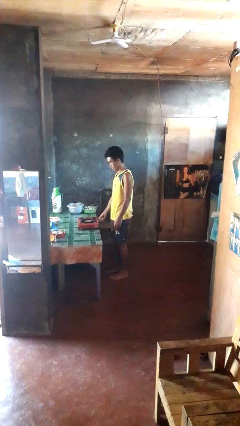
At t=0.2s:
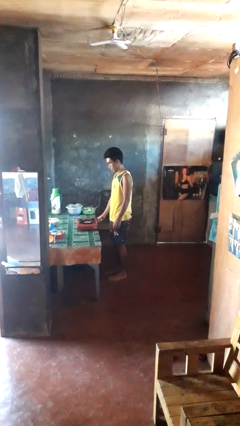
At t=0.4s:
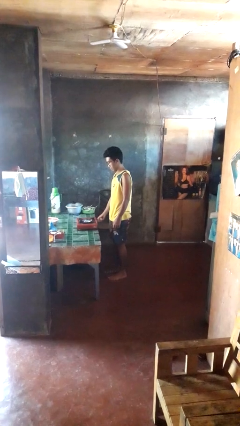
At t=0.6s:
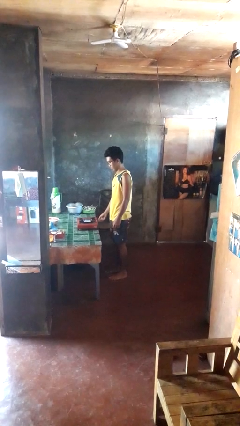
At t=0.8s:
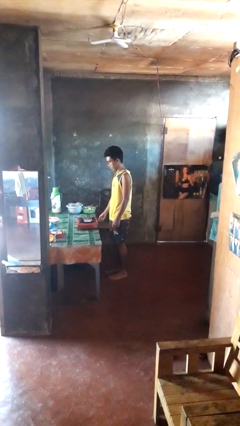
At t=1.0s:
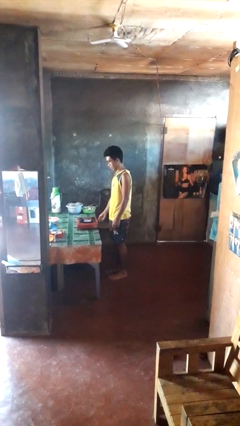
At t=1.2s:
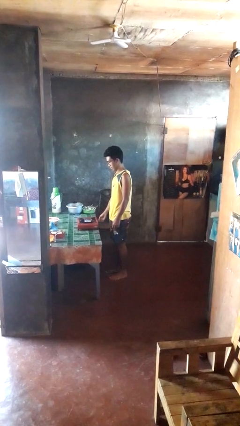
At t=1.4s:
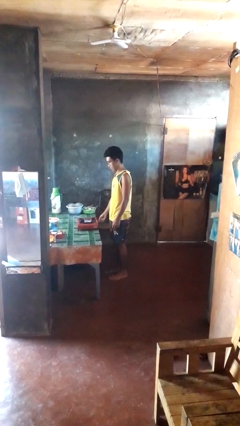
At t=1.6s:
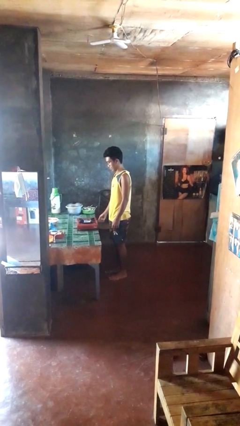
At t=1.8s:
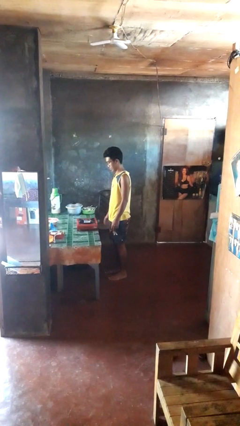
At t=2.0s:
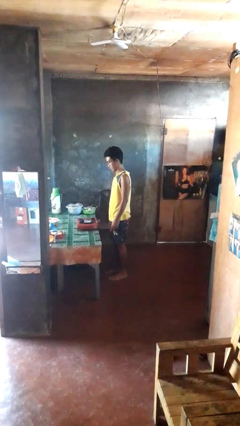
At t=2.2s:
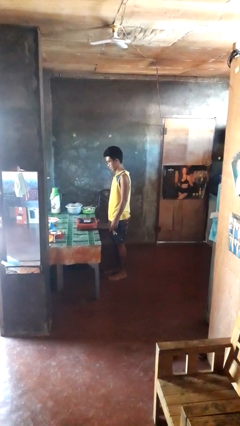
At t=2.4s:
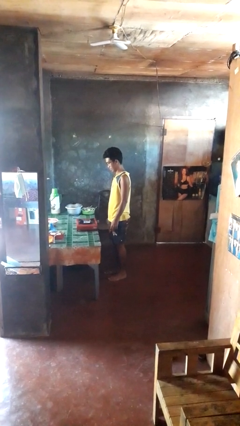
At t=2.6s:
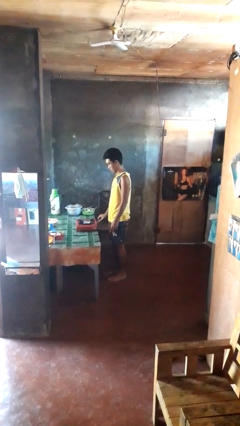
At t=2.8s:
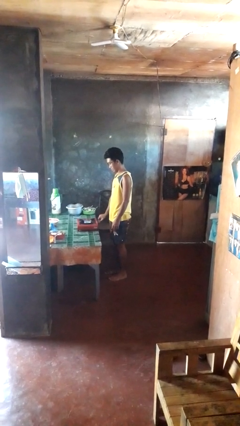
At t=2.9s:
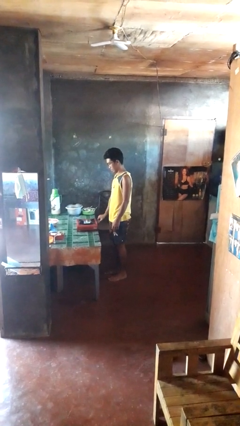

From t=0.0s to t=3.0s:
person turns on stovetop

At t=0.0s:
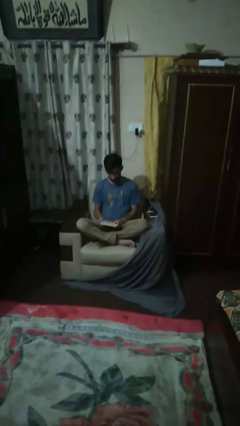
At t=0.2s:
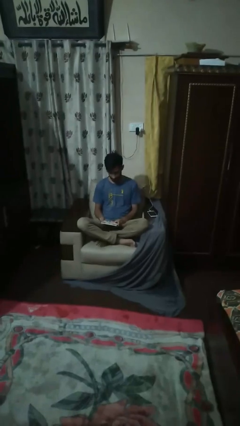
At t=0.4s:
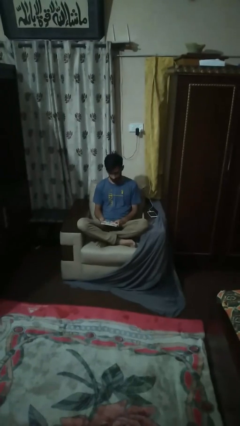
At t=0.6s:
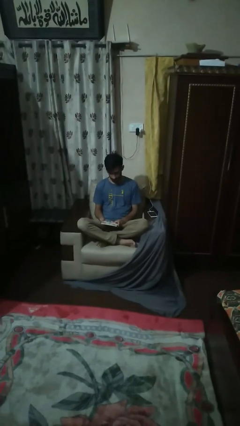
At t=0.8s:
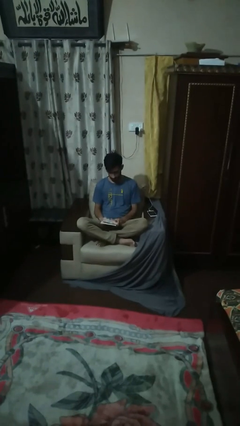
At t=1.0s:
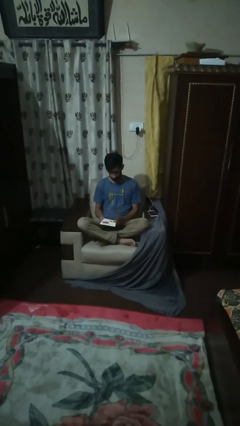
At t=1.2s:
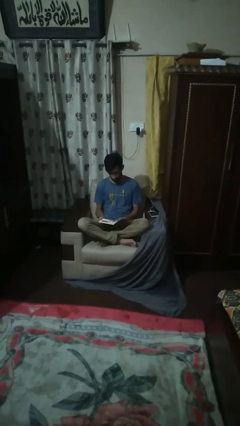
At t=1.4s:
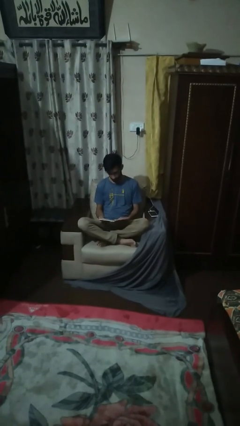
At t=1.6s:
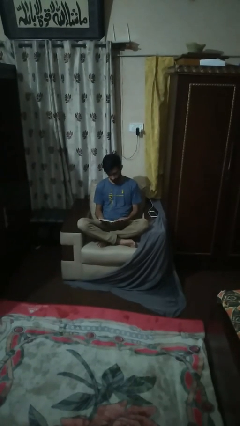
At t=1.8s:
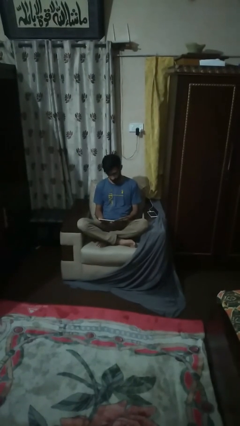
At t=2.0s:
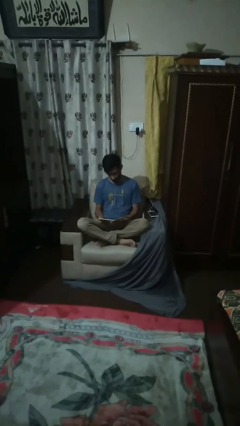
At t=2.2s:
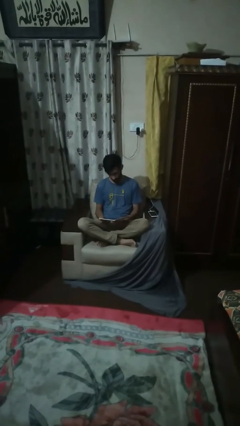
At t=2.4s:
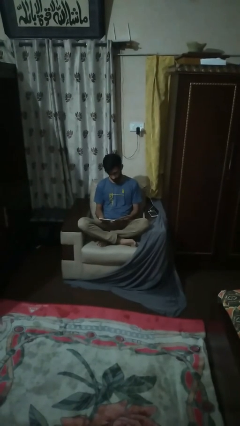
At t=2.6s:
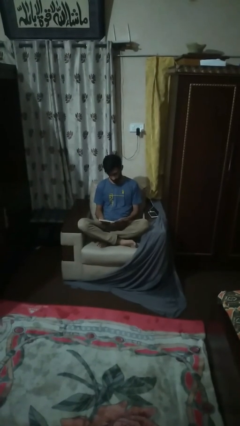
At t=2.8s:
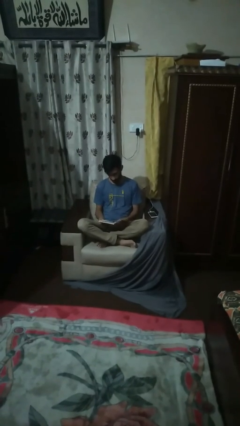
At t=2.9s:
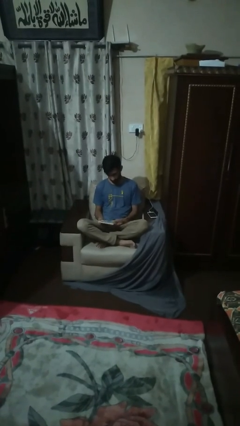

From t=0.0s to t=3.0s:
person reads book

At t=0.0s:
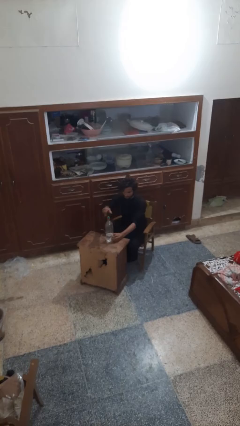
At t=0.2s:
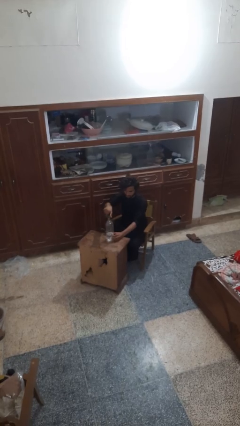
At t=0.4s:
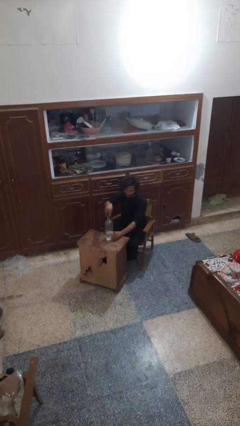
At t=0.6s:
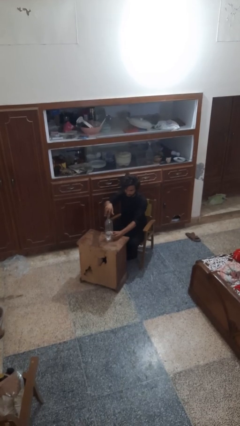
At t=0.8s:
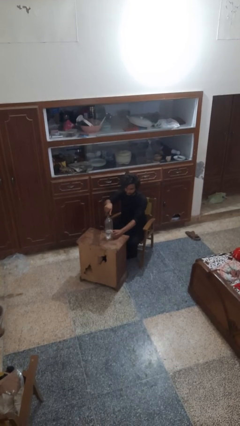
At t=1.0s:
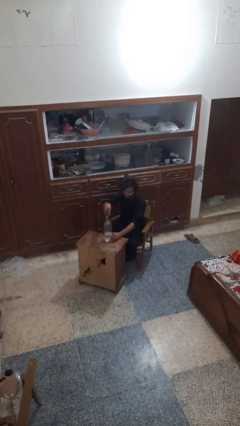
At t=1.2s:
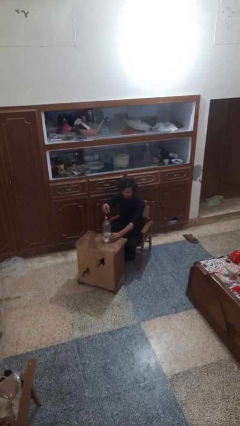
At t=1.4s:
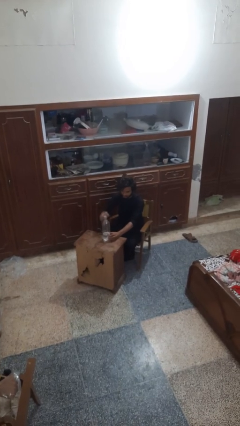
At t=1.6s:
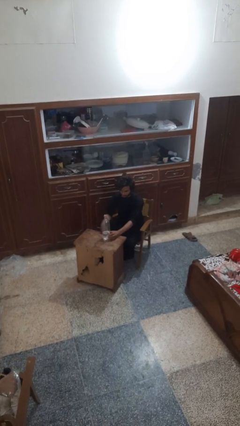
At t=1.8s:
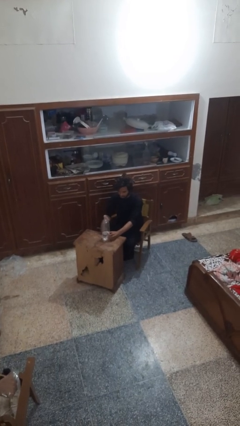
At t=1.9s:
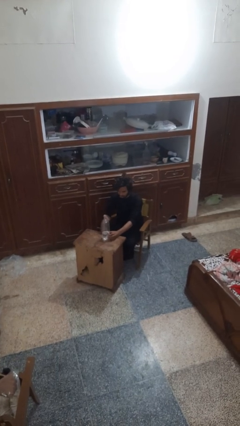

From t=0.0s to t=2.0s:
person unscrews lid from bottle

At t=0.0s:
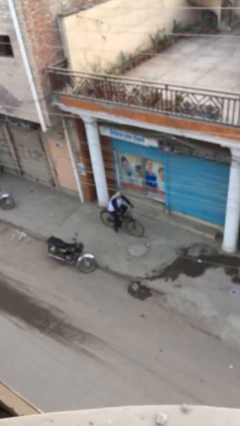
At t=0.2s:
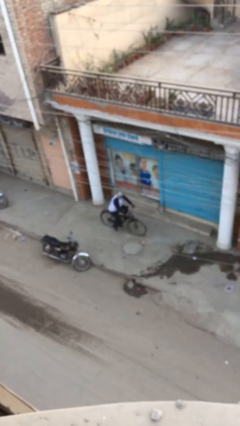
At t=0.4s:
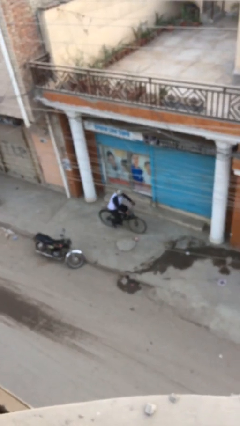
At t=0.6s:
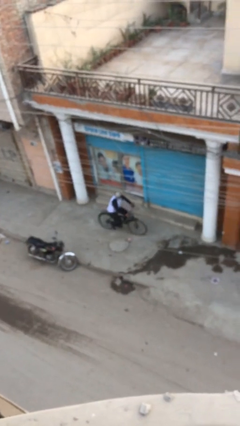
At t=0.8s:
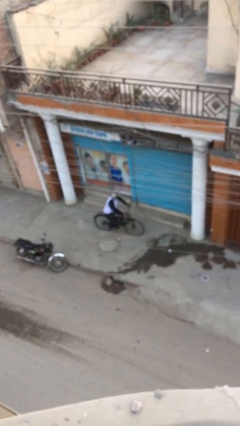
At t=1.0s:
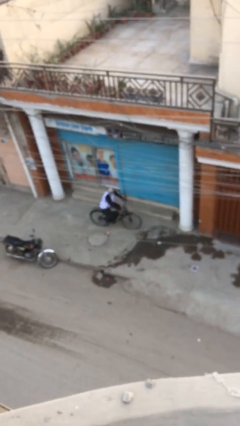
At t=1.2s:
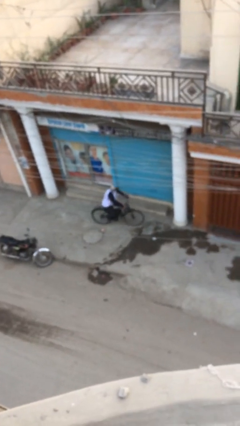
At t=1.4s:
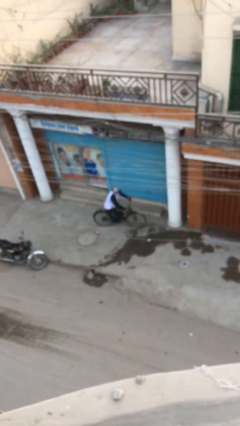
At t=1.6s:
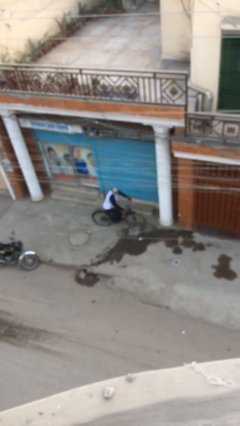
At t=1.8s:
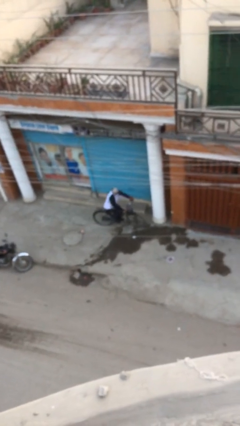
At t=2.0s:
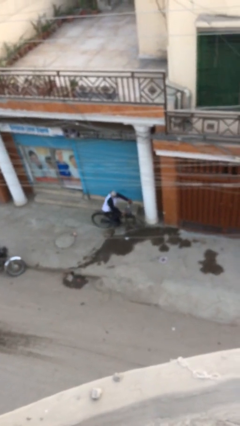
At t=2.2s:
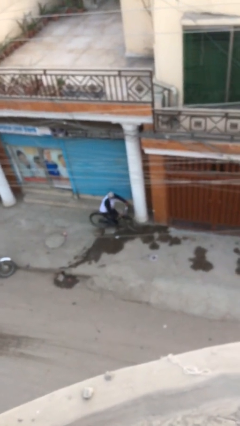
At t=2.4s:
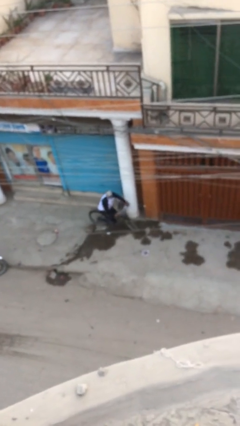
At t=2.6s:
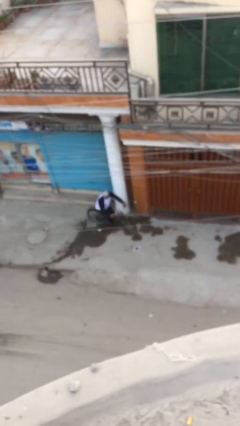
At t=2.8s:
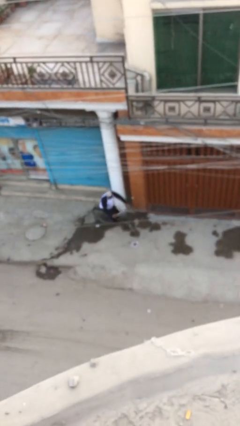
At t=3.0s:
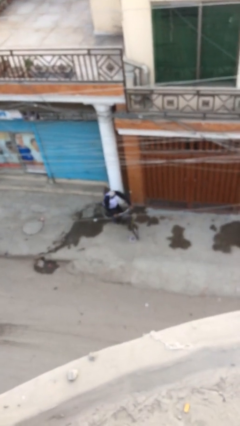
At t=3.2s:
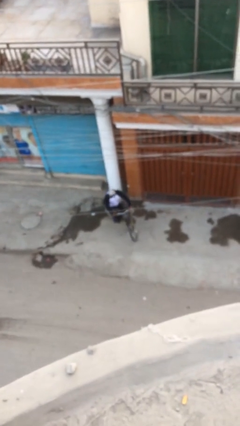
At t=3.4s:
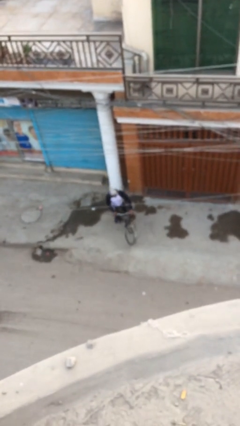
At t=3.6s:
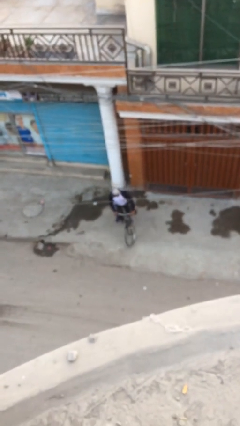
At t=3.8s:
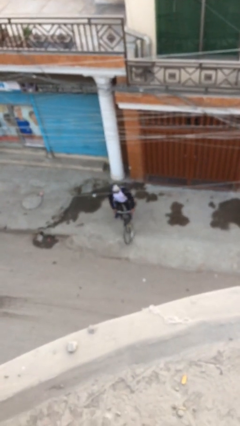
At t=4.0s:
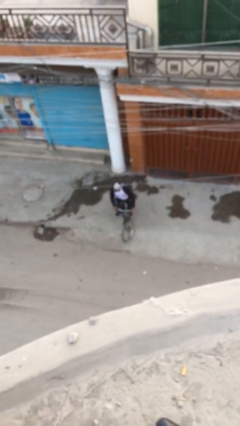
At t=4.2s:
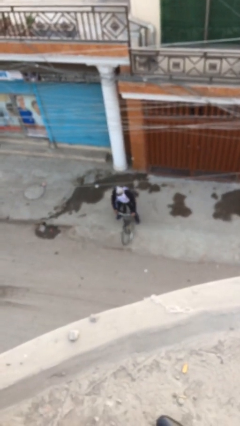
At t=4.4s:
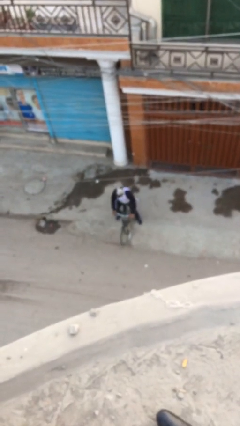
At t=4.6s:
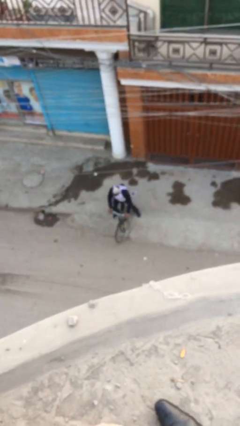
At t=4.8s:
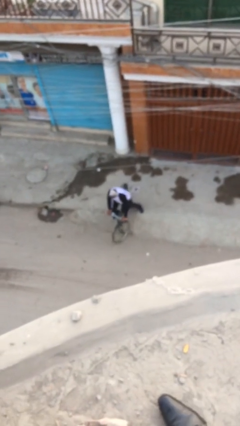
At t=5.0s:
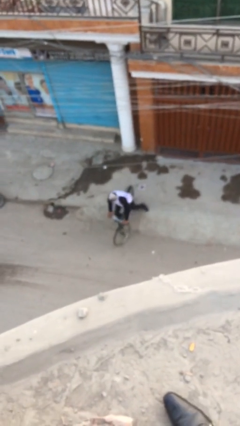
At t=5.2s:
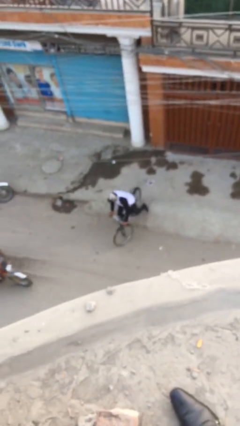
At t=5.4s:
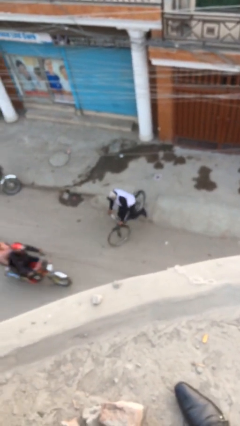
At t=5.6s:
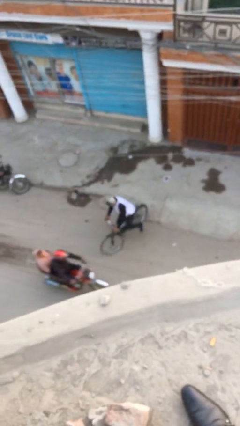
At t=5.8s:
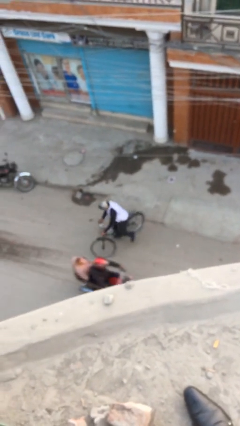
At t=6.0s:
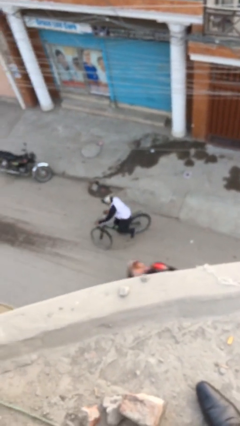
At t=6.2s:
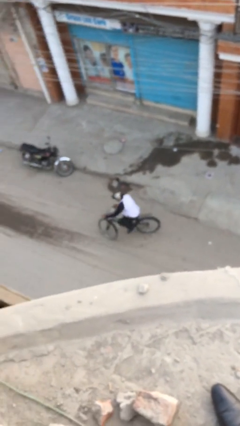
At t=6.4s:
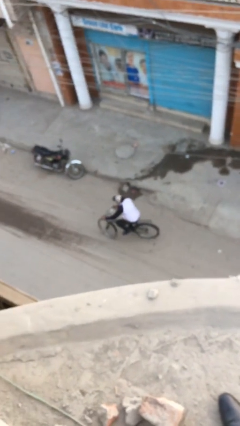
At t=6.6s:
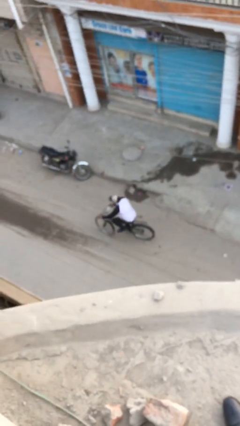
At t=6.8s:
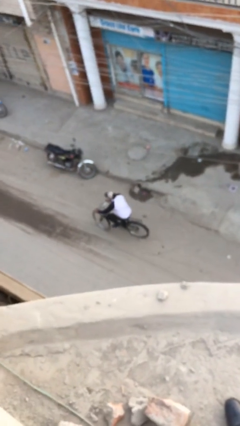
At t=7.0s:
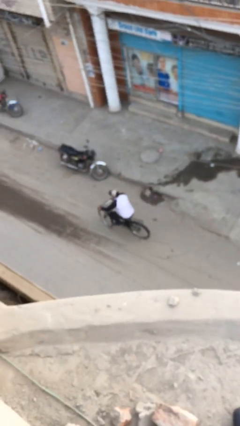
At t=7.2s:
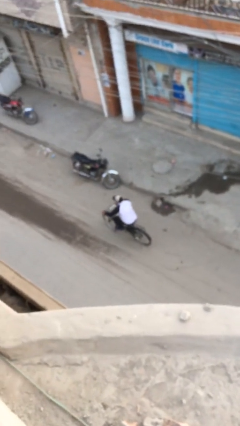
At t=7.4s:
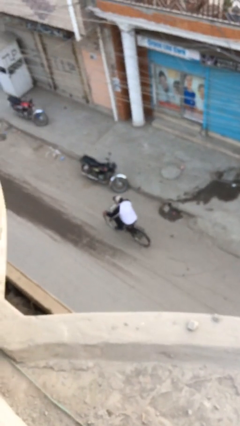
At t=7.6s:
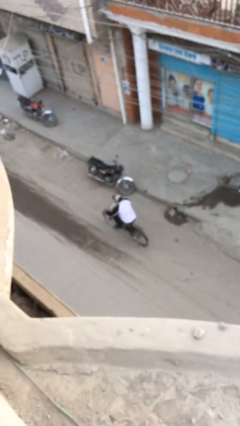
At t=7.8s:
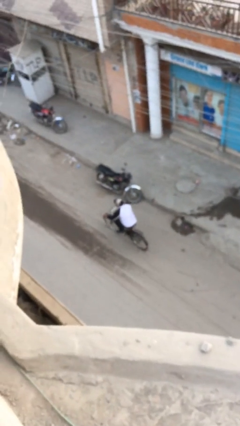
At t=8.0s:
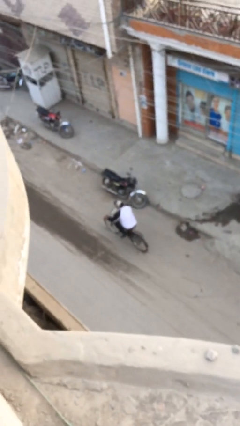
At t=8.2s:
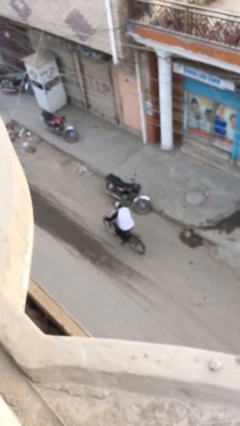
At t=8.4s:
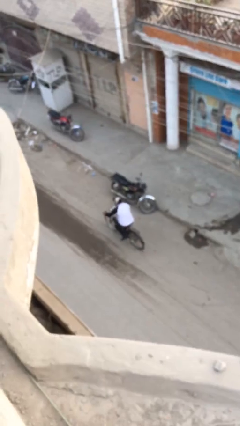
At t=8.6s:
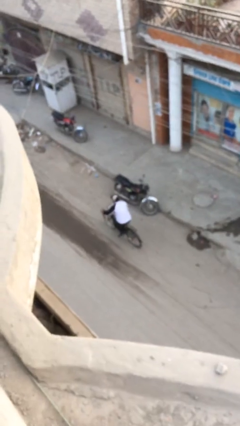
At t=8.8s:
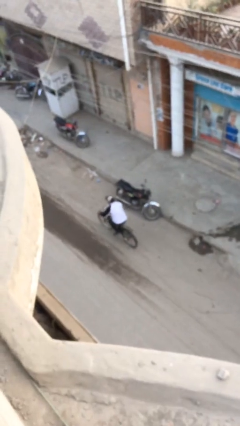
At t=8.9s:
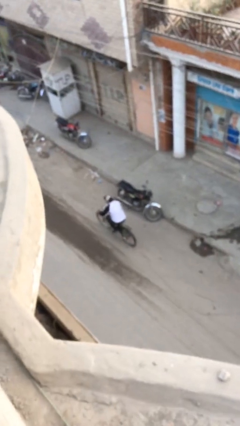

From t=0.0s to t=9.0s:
person rides bicycle

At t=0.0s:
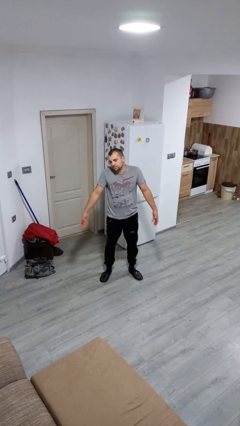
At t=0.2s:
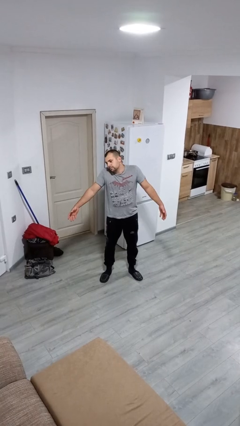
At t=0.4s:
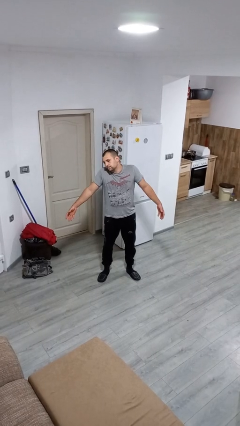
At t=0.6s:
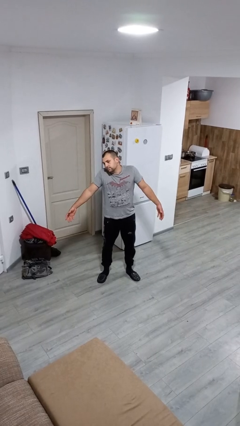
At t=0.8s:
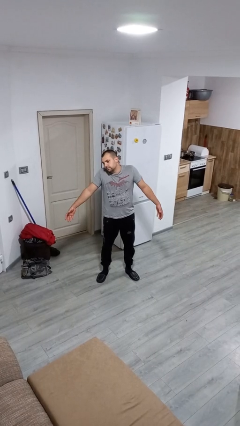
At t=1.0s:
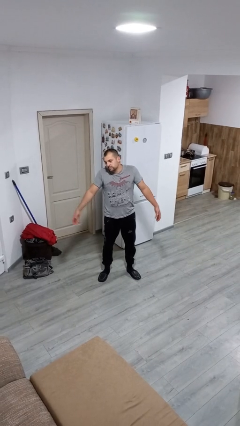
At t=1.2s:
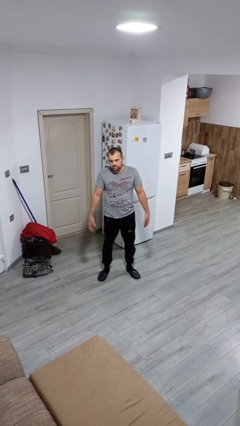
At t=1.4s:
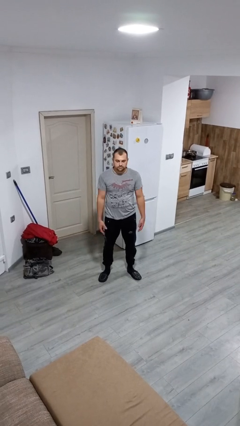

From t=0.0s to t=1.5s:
person shrugs
